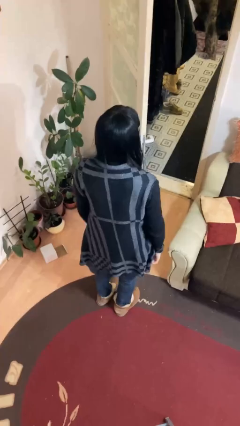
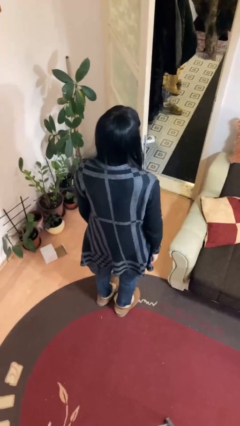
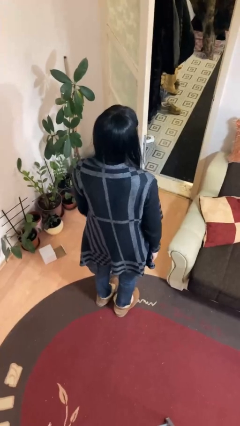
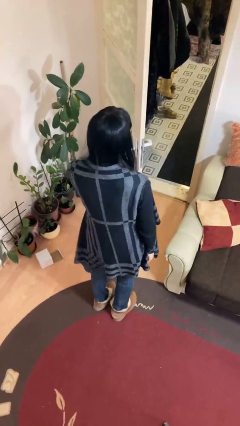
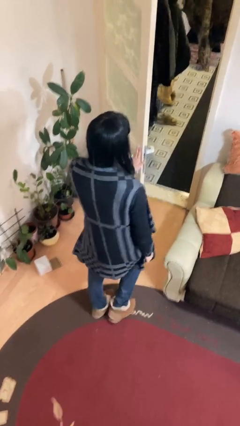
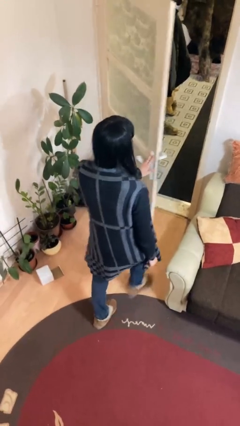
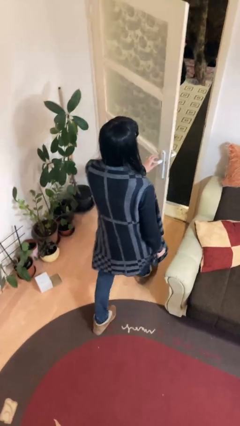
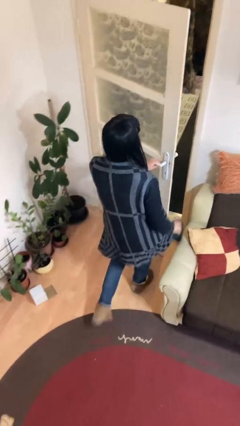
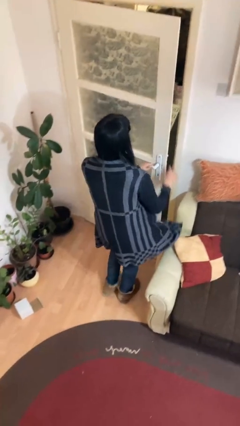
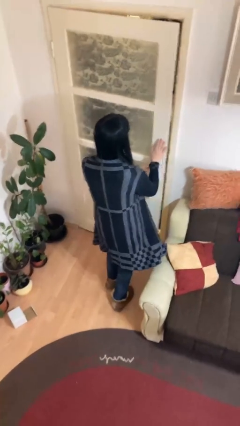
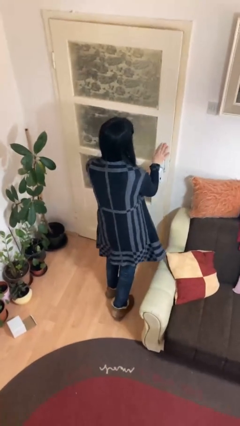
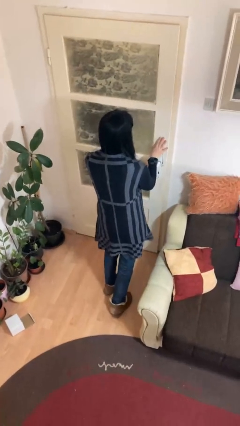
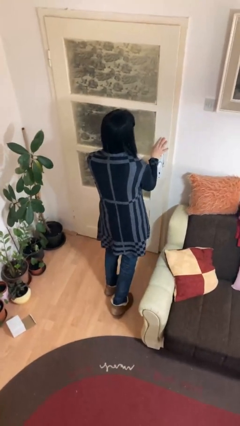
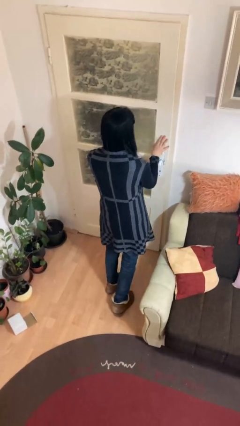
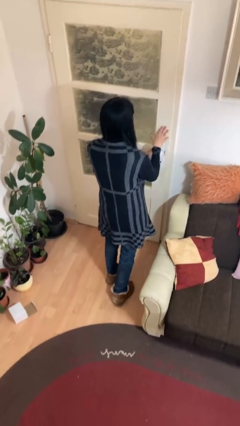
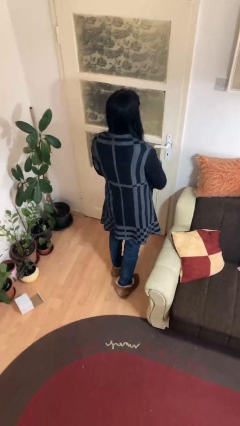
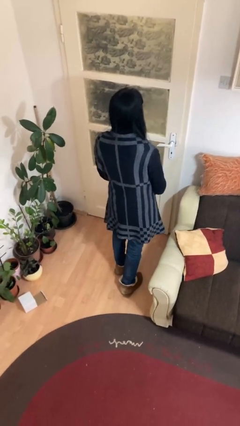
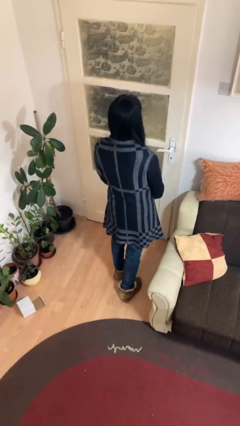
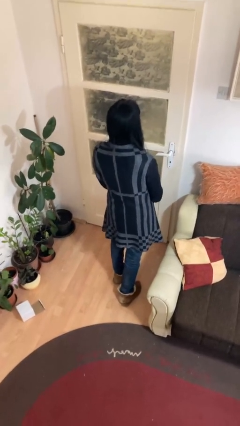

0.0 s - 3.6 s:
person closes facility door

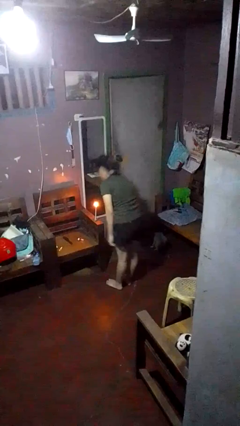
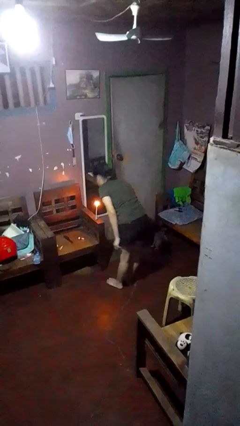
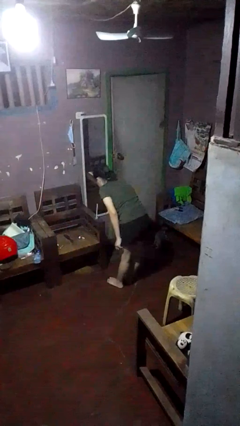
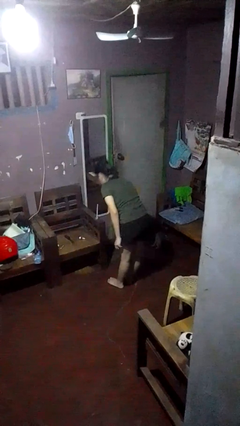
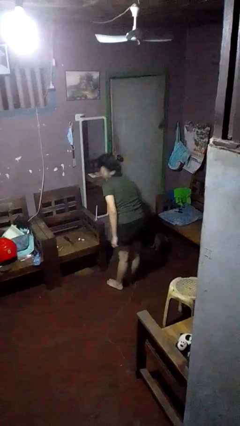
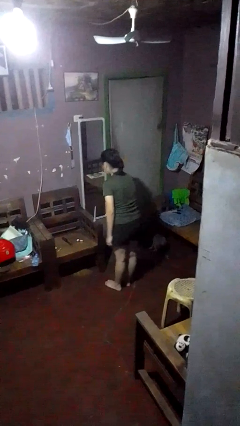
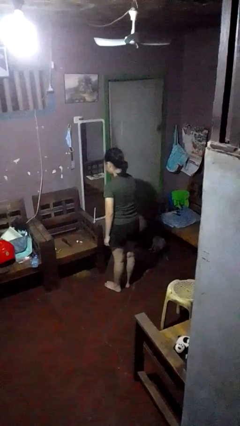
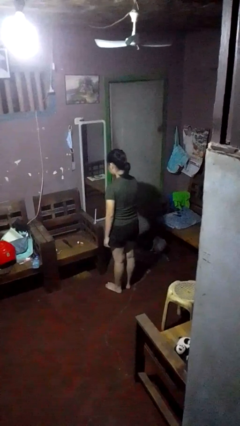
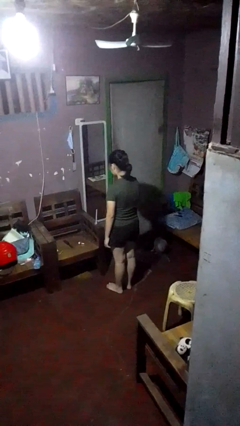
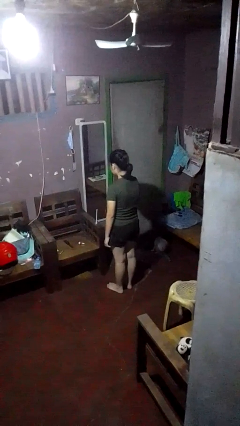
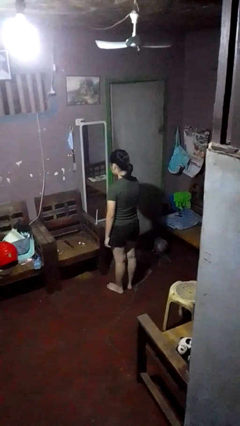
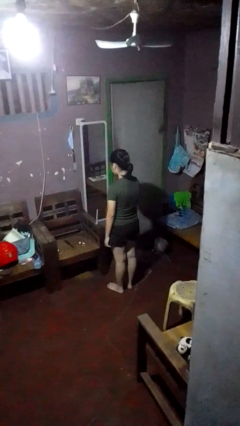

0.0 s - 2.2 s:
person extinguishes candle

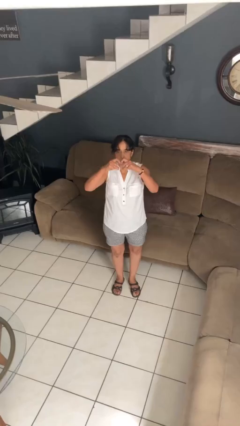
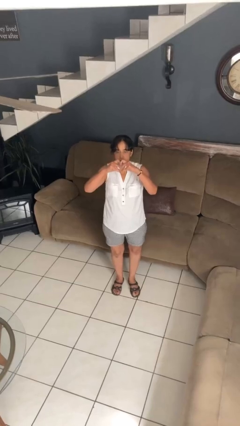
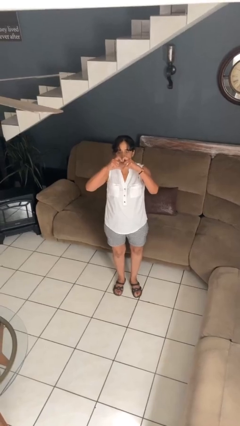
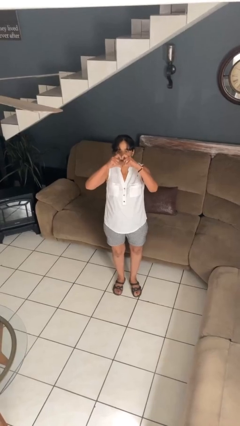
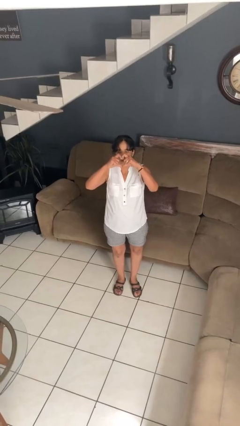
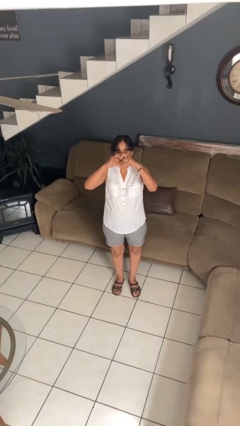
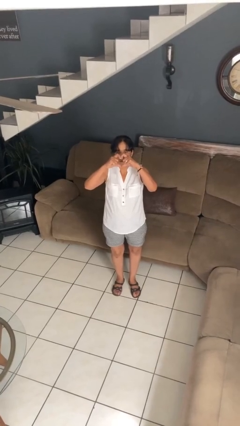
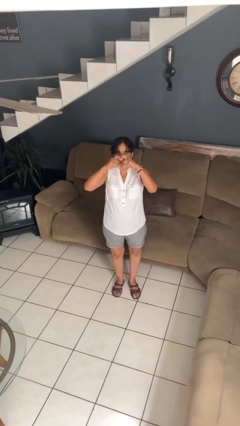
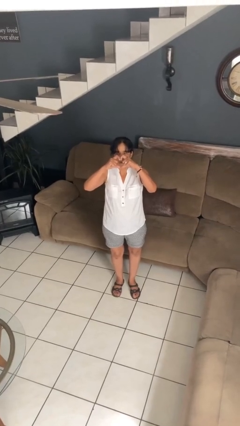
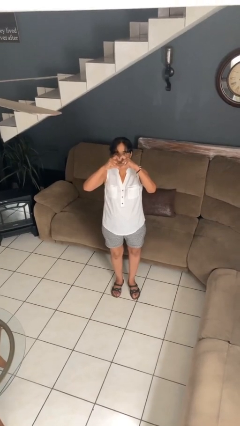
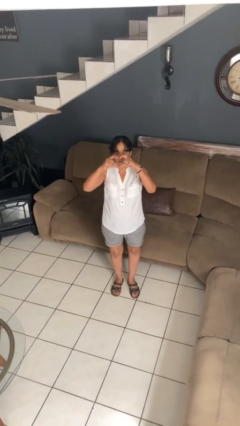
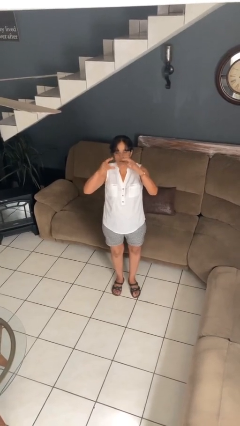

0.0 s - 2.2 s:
person gestures heart

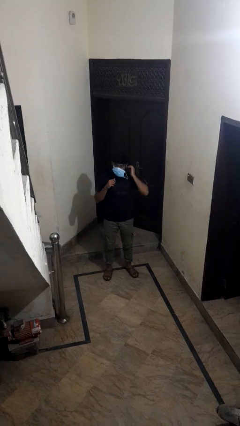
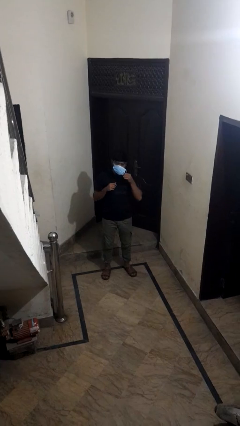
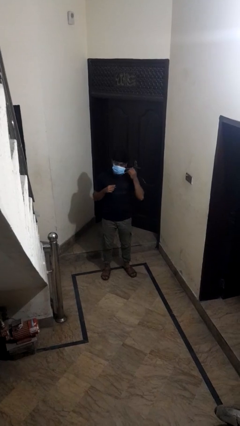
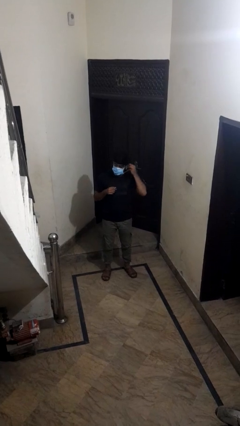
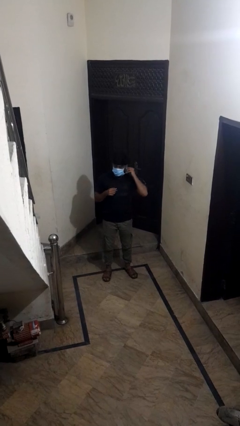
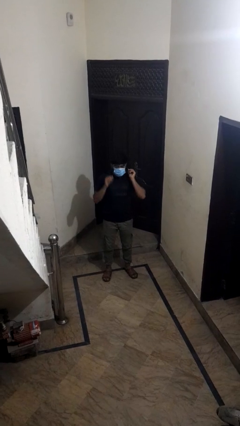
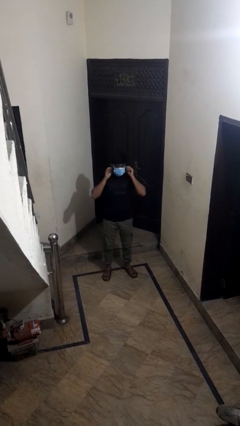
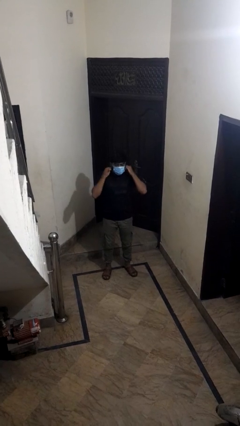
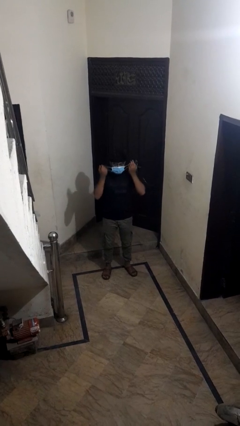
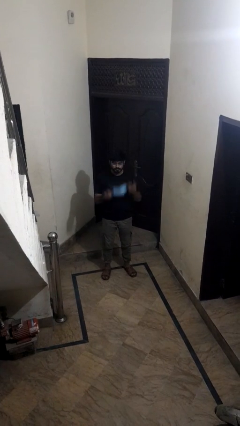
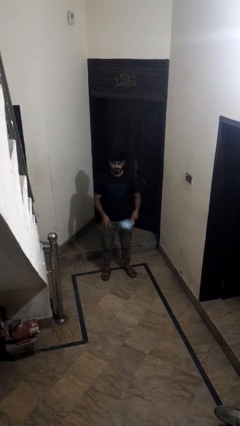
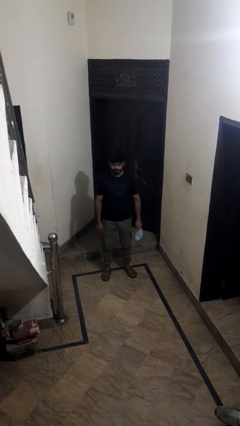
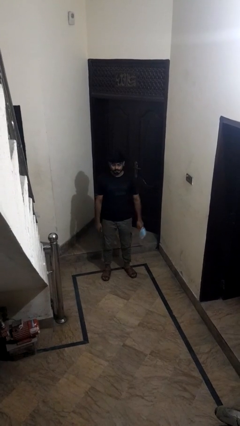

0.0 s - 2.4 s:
person takes off facemask

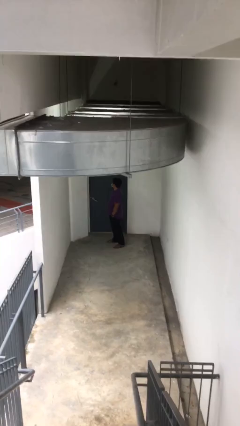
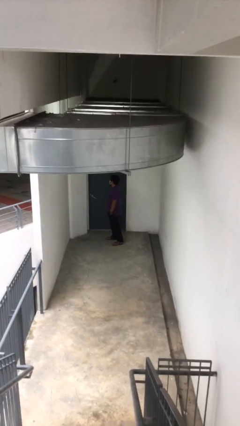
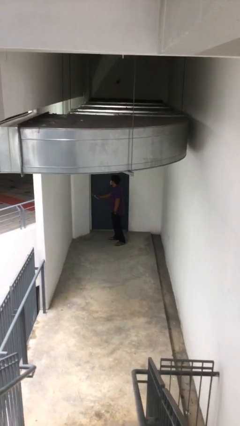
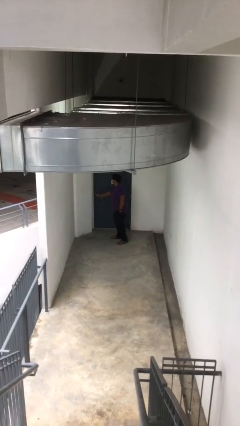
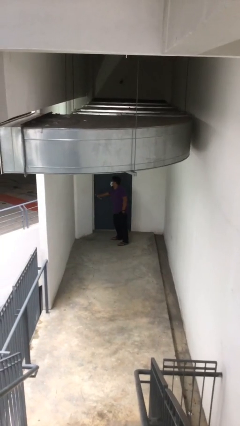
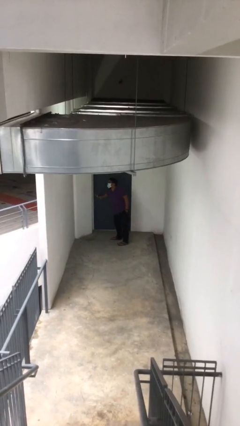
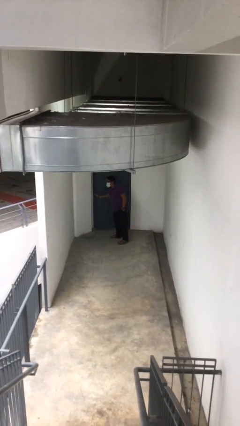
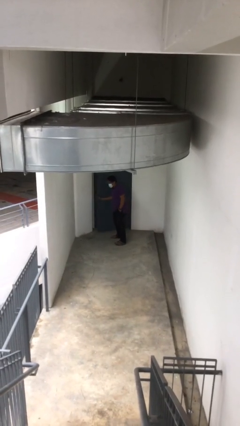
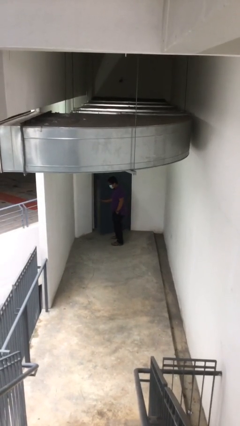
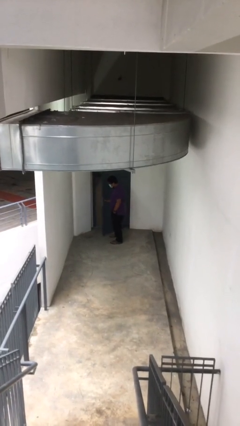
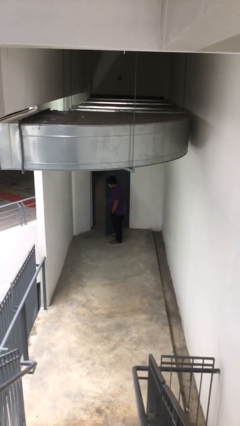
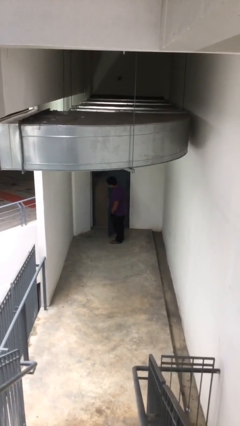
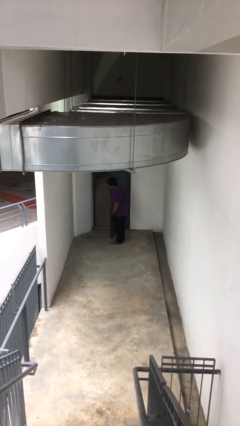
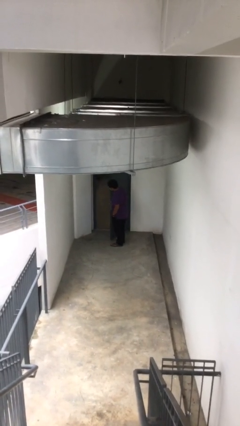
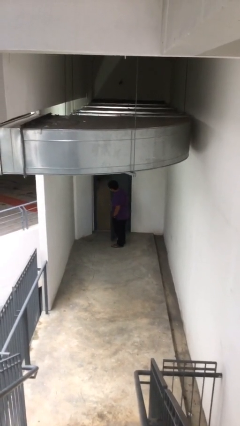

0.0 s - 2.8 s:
person opens facility door

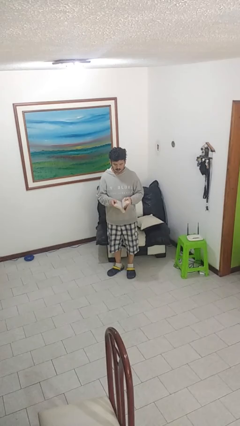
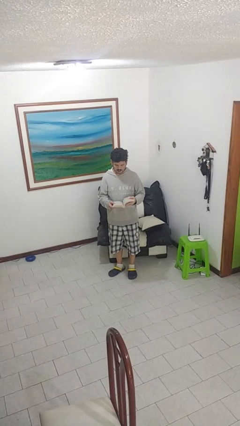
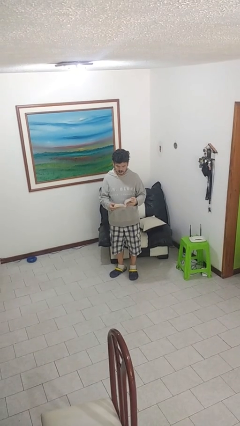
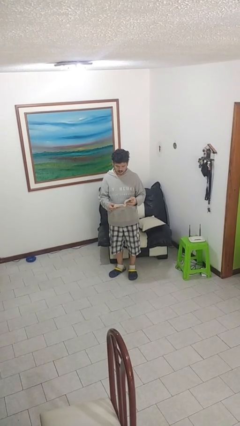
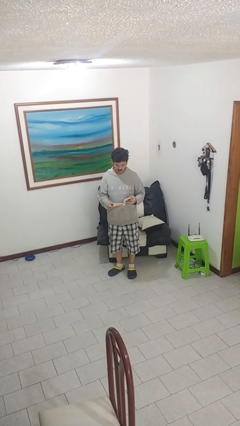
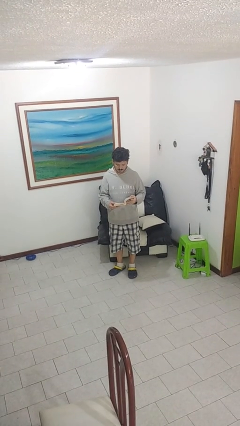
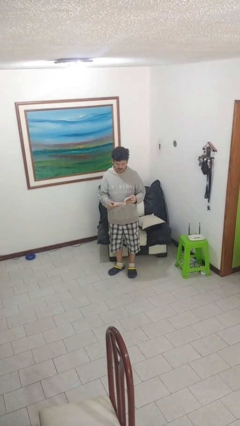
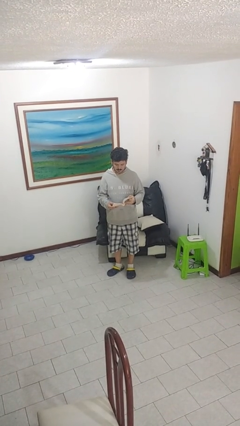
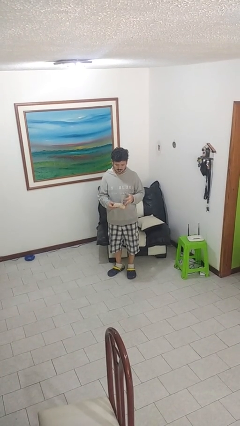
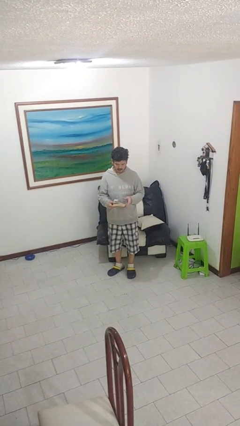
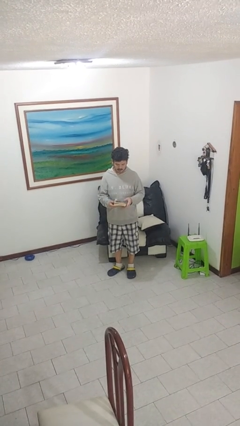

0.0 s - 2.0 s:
person reads book

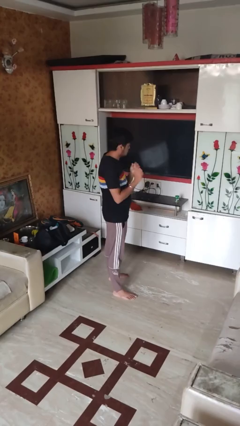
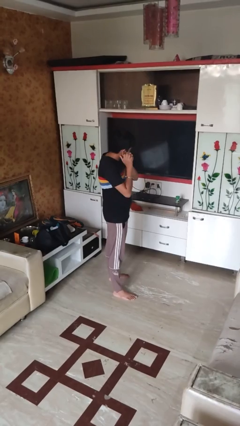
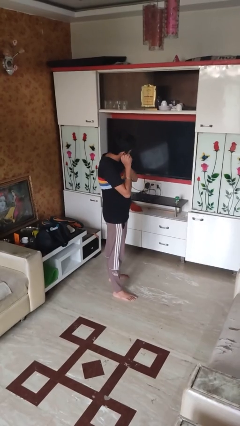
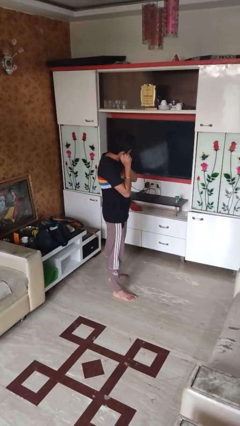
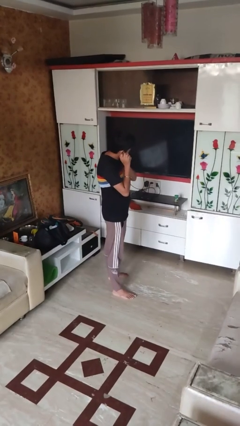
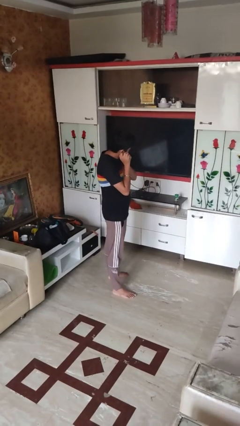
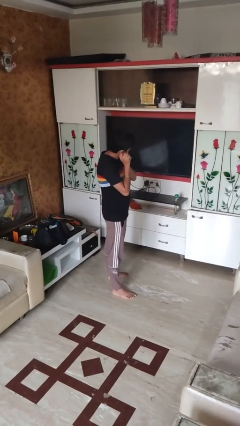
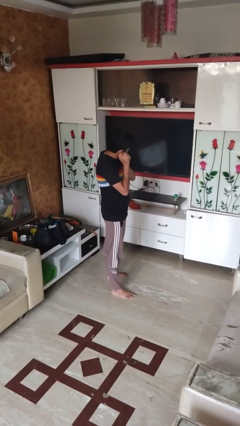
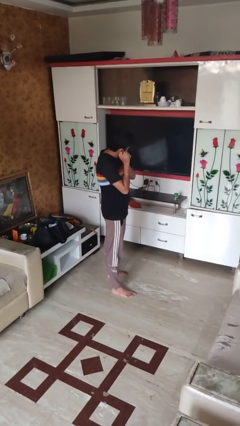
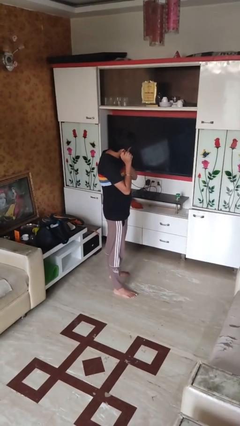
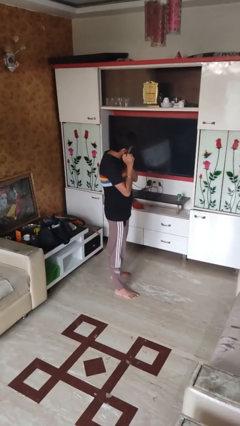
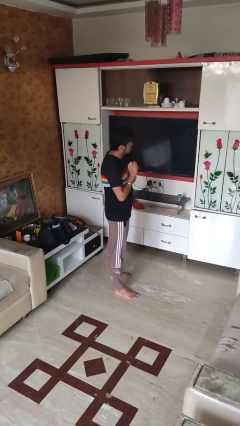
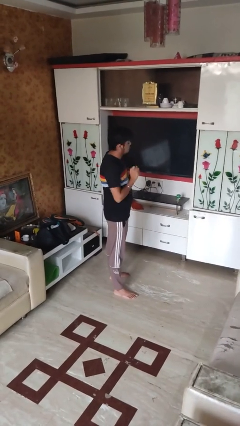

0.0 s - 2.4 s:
person takes off earrings
